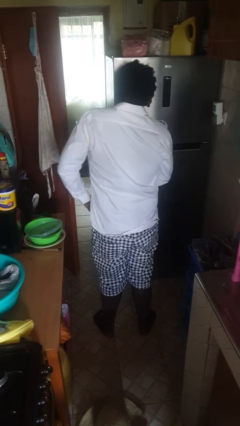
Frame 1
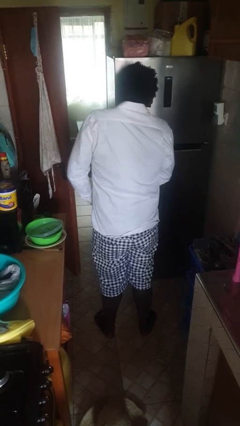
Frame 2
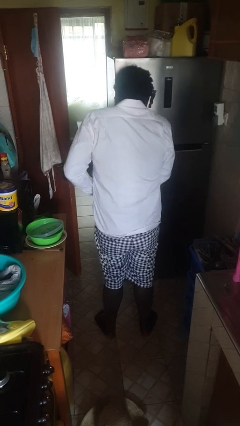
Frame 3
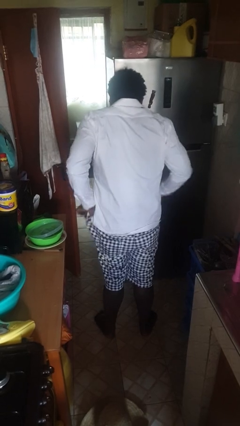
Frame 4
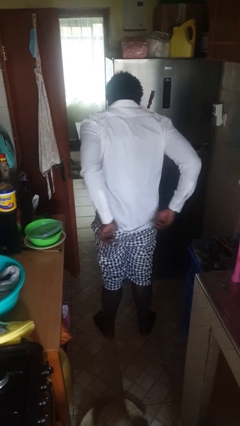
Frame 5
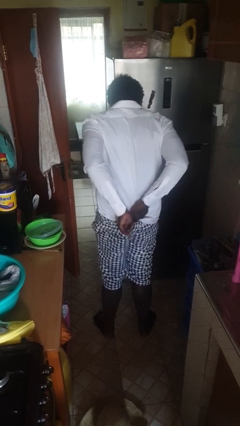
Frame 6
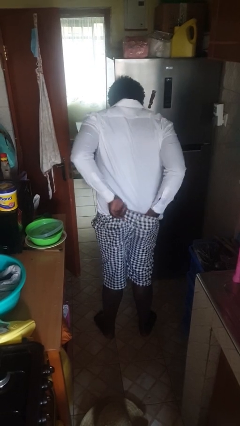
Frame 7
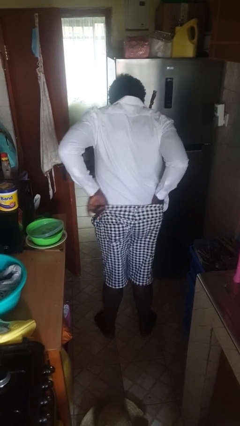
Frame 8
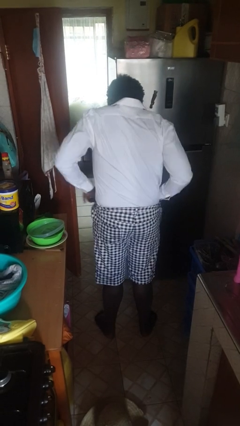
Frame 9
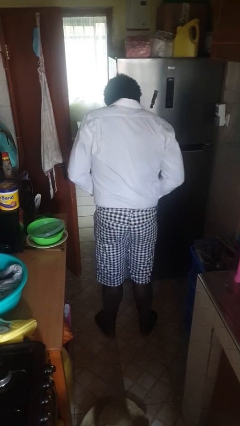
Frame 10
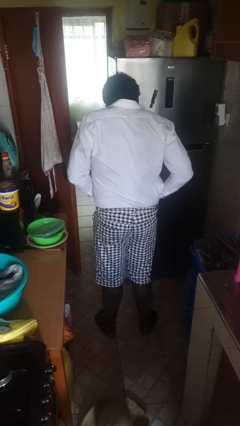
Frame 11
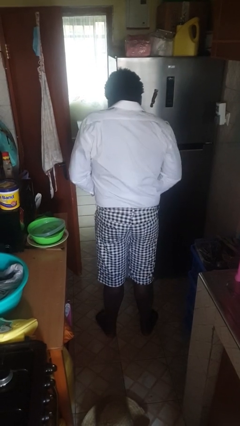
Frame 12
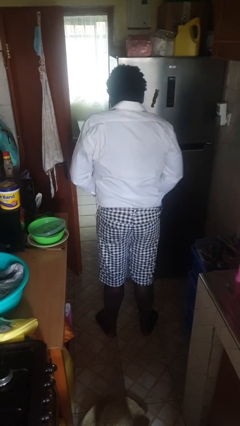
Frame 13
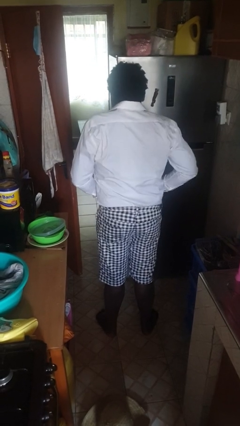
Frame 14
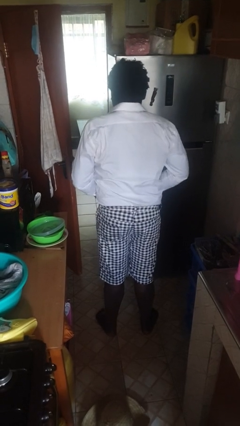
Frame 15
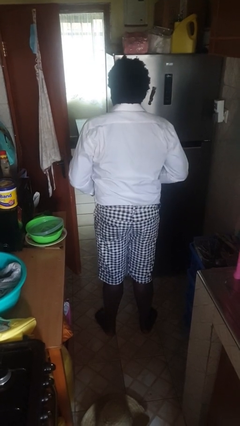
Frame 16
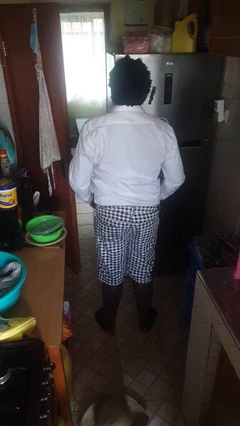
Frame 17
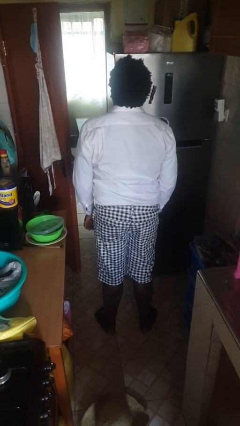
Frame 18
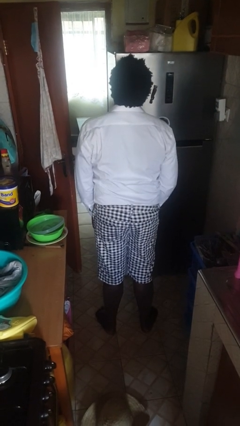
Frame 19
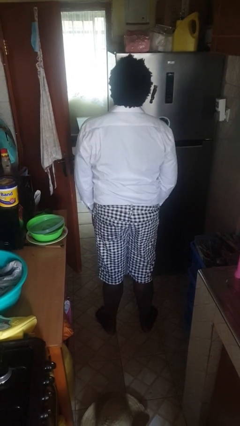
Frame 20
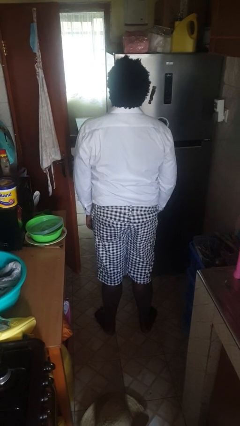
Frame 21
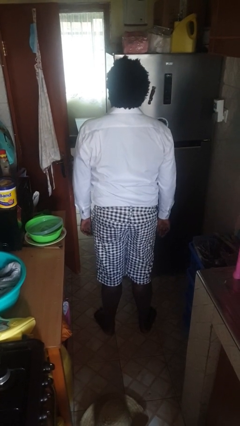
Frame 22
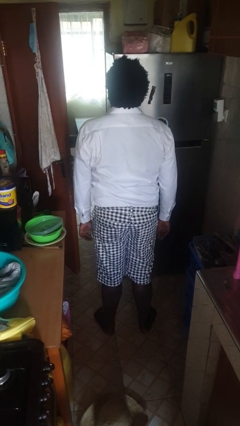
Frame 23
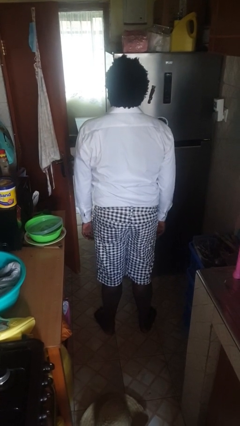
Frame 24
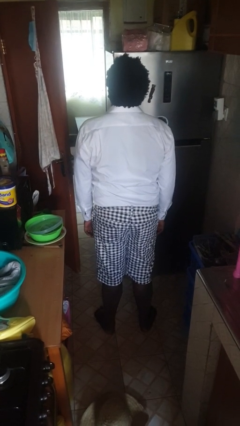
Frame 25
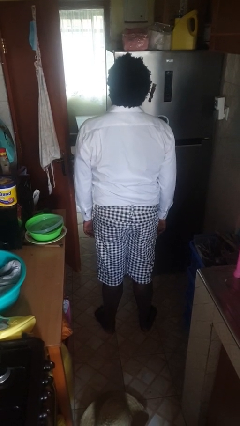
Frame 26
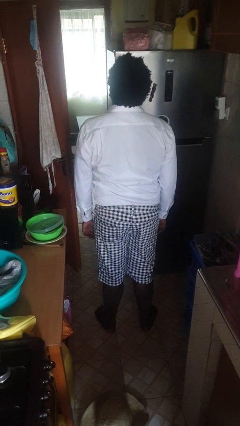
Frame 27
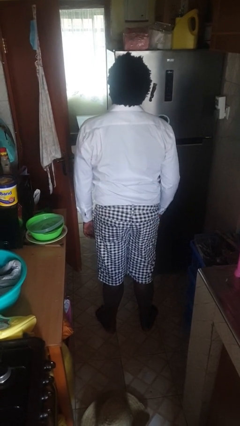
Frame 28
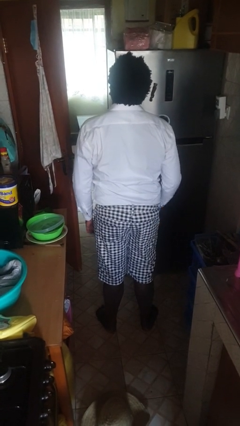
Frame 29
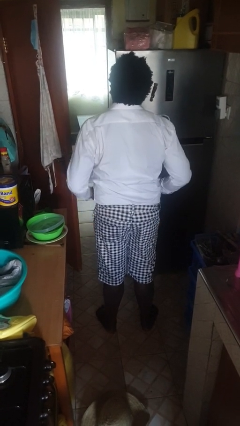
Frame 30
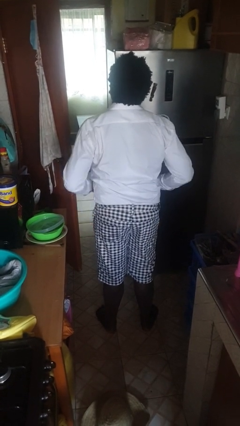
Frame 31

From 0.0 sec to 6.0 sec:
person tucks in shirt

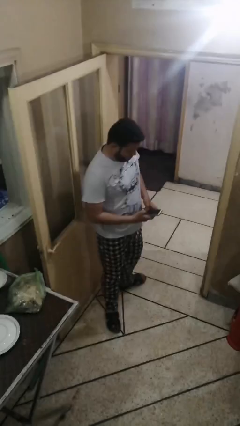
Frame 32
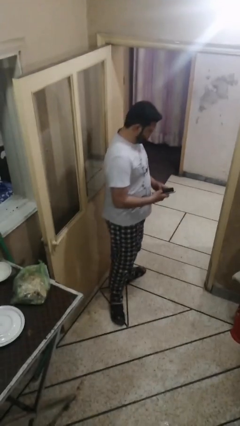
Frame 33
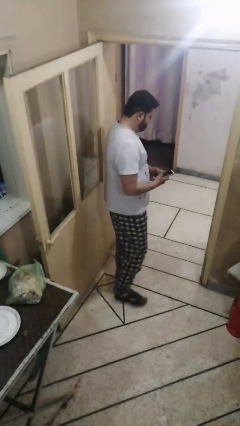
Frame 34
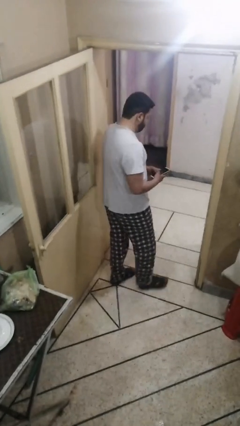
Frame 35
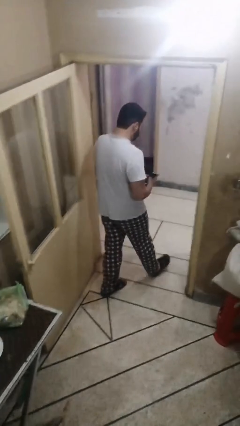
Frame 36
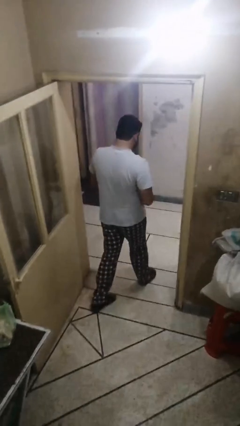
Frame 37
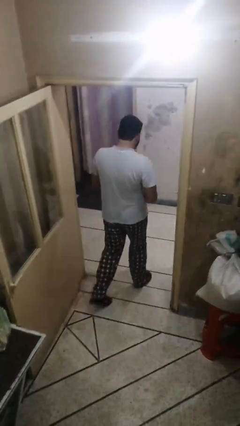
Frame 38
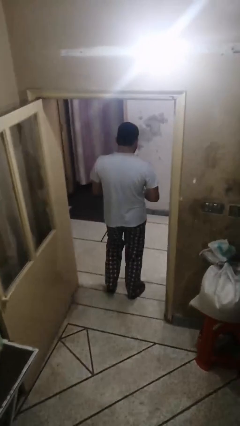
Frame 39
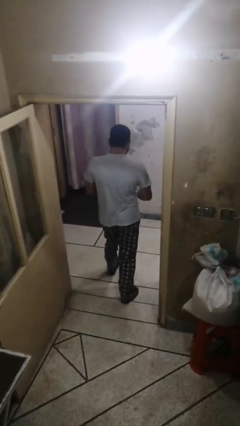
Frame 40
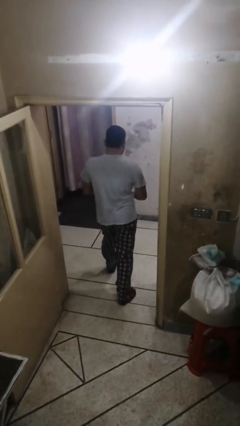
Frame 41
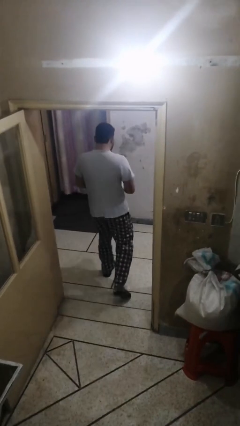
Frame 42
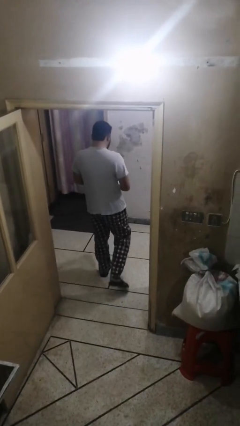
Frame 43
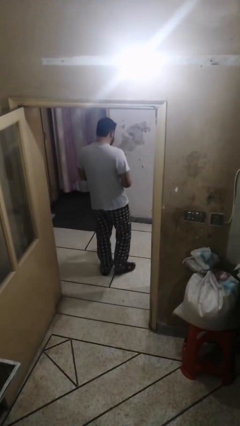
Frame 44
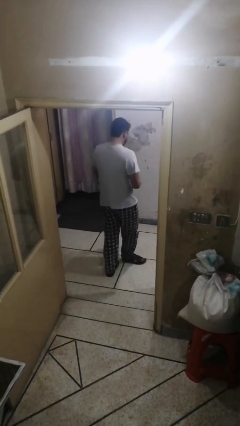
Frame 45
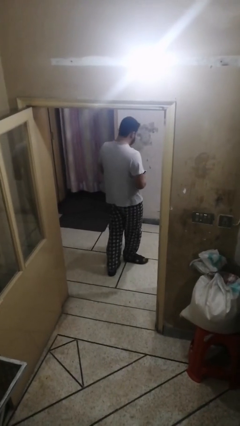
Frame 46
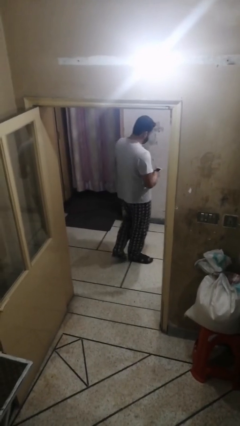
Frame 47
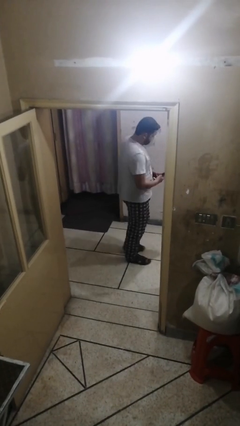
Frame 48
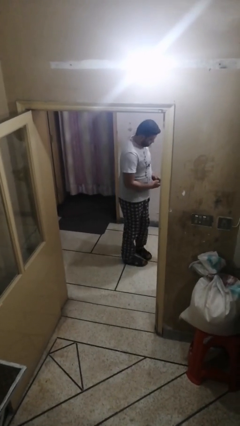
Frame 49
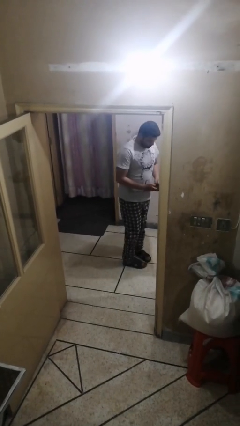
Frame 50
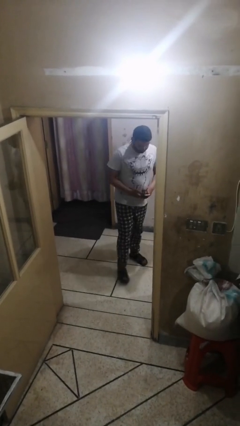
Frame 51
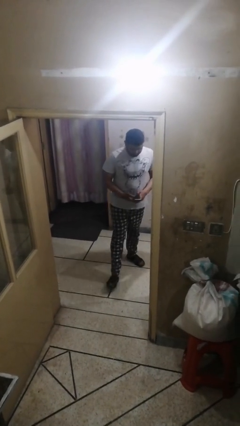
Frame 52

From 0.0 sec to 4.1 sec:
person exits scene through structure

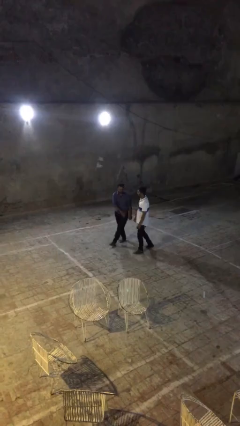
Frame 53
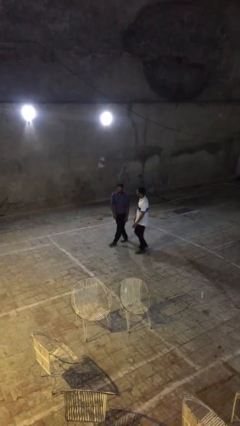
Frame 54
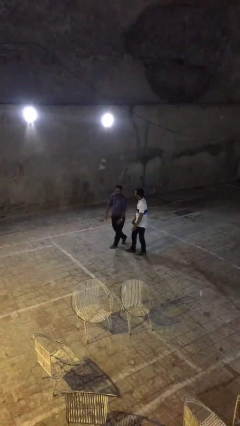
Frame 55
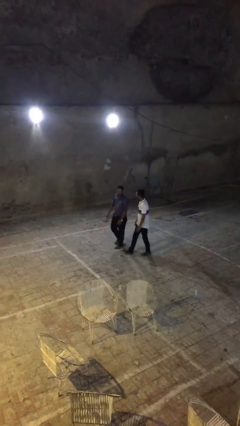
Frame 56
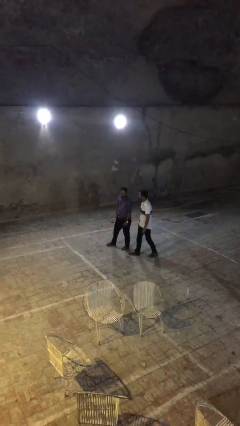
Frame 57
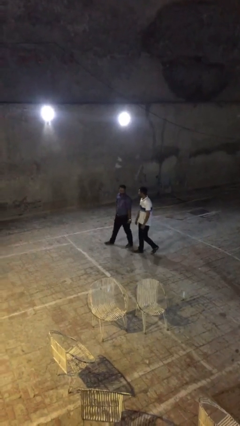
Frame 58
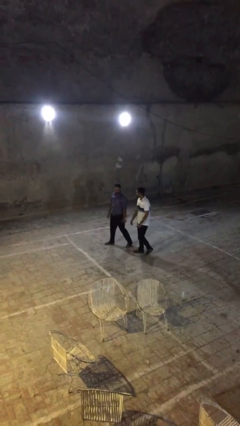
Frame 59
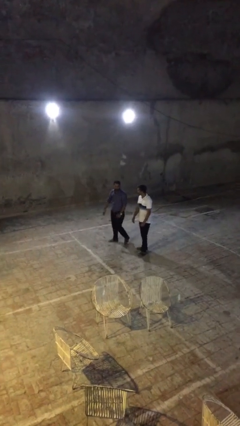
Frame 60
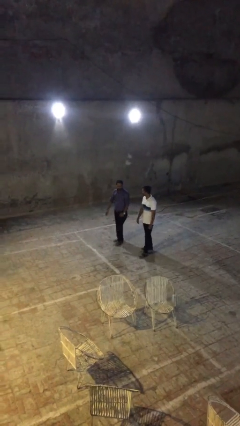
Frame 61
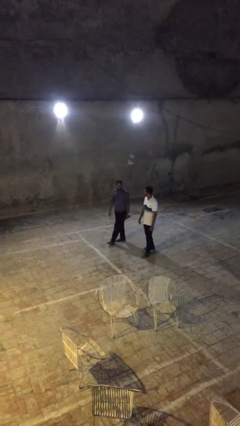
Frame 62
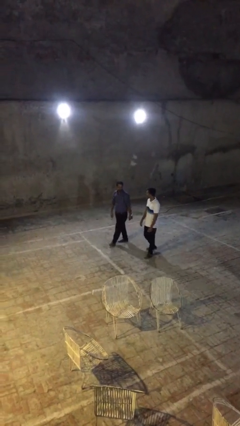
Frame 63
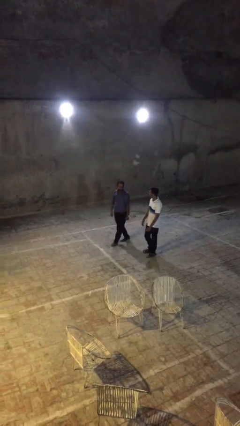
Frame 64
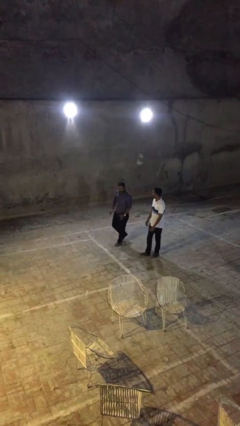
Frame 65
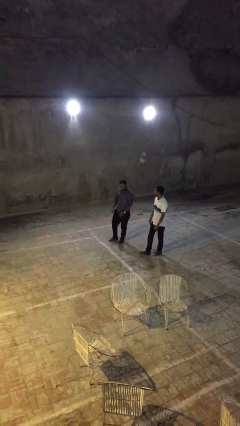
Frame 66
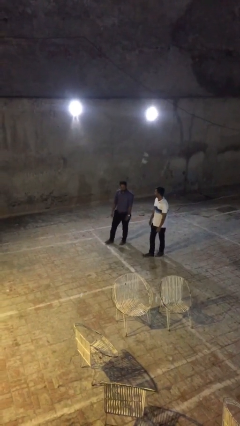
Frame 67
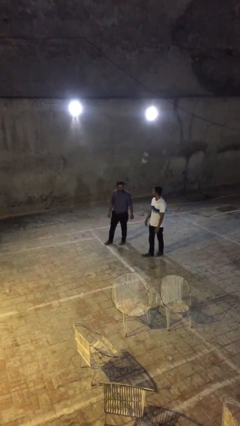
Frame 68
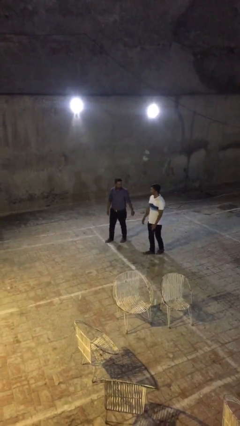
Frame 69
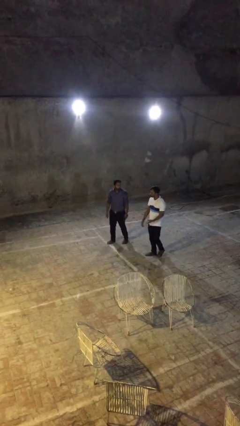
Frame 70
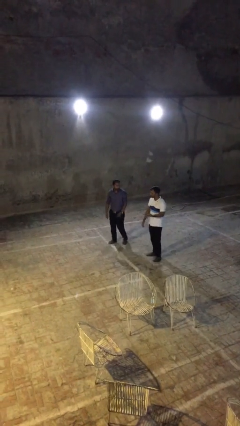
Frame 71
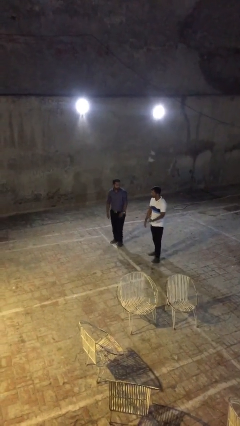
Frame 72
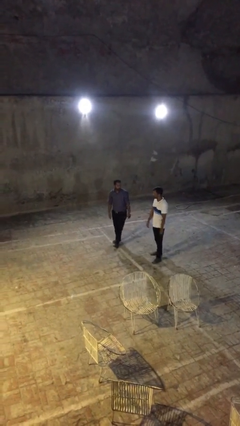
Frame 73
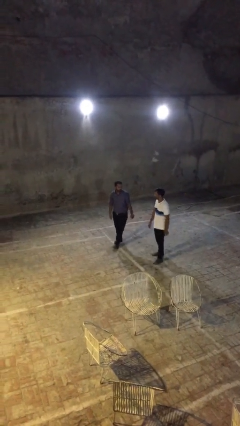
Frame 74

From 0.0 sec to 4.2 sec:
person talks to person

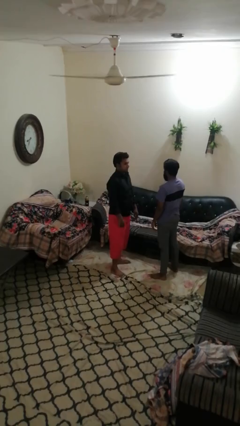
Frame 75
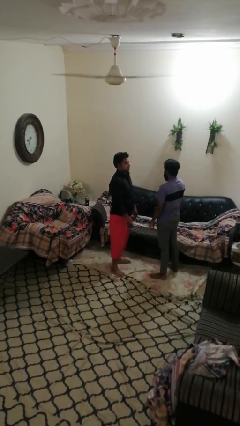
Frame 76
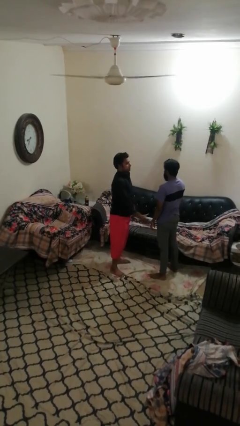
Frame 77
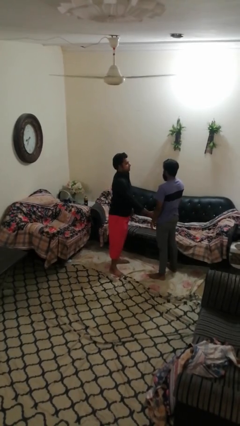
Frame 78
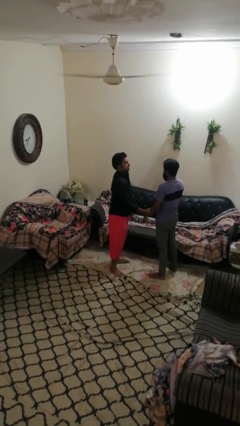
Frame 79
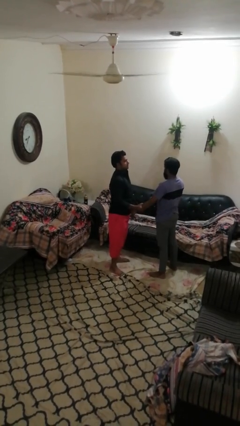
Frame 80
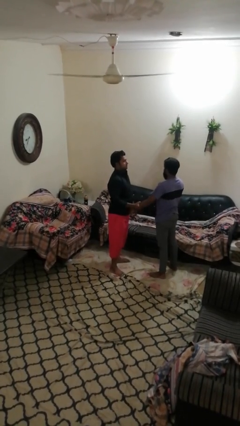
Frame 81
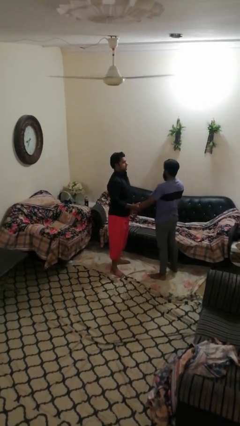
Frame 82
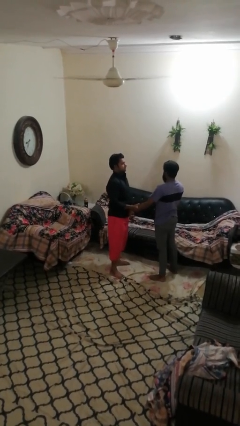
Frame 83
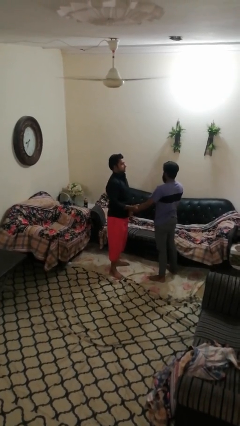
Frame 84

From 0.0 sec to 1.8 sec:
person grabs person by forearm

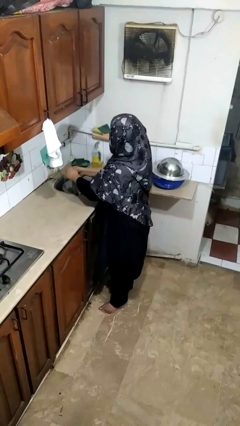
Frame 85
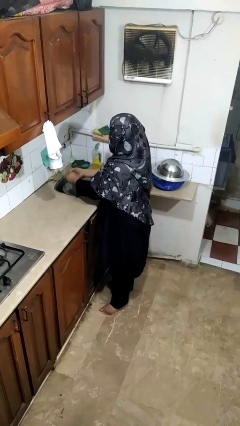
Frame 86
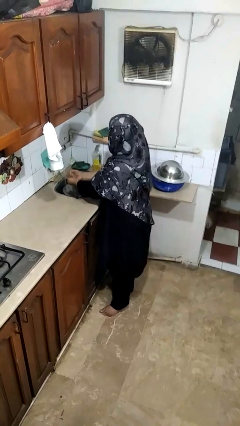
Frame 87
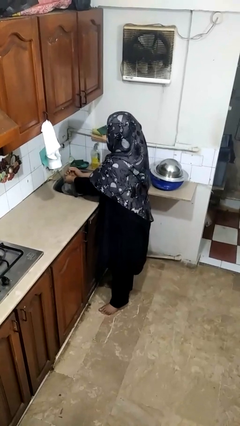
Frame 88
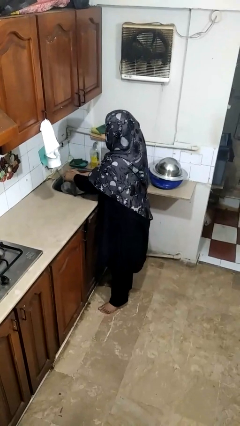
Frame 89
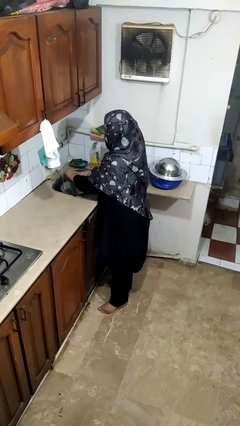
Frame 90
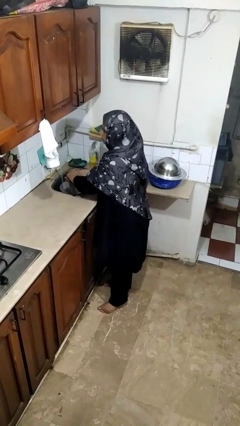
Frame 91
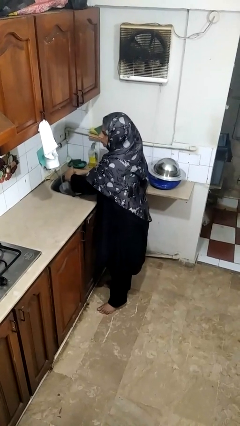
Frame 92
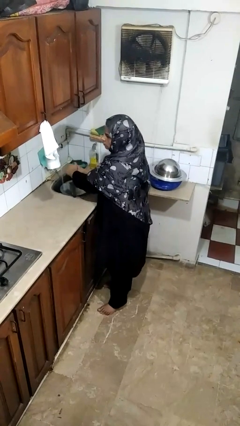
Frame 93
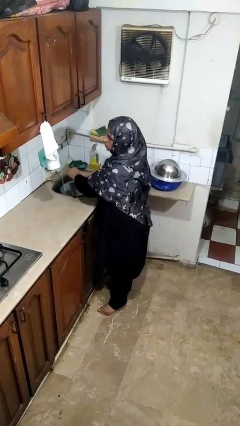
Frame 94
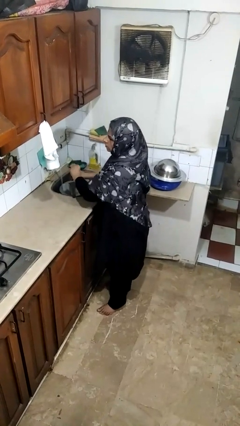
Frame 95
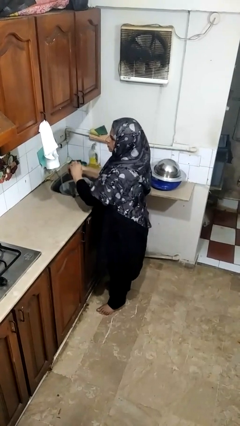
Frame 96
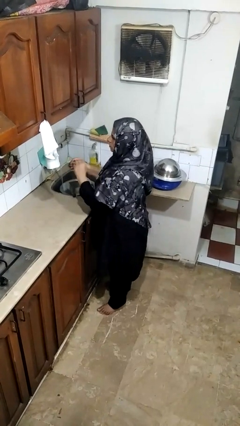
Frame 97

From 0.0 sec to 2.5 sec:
person washes hands
